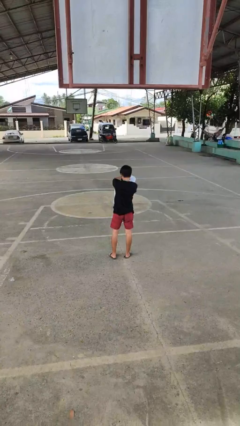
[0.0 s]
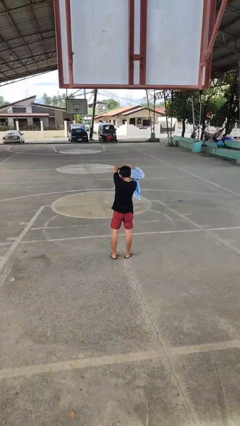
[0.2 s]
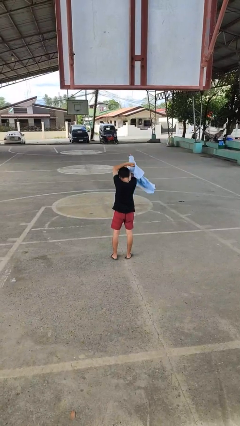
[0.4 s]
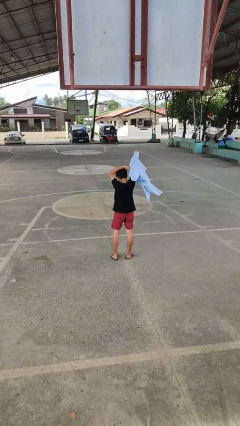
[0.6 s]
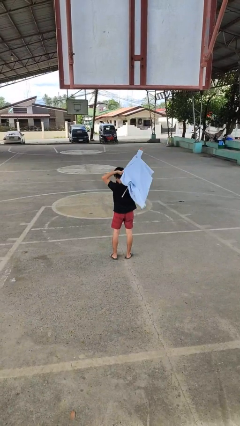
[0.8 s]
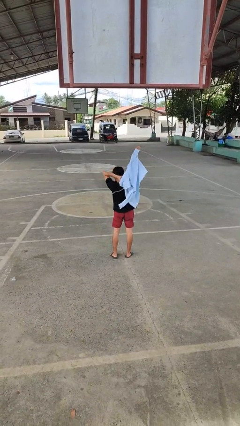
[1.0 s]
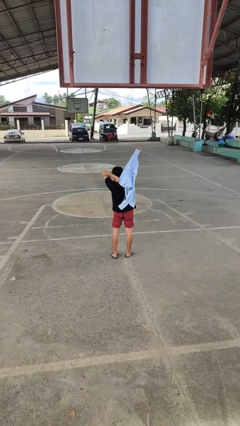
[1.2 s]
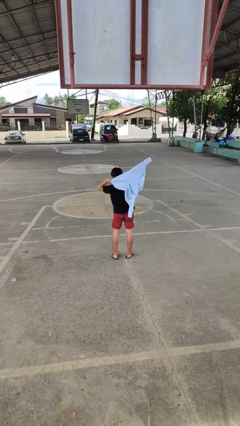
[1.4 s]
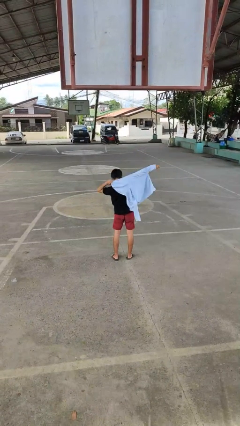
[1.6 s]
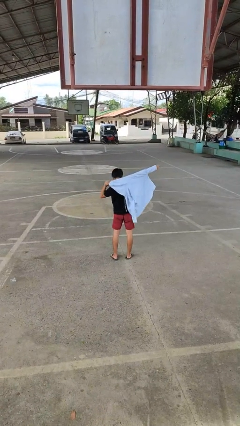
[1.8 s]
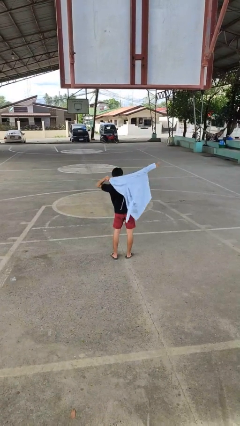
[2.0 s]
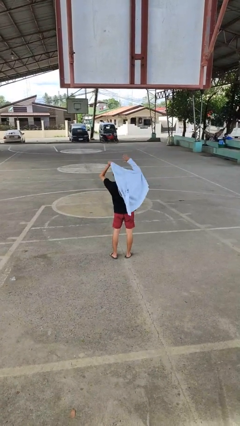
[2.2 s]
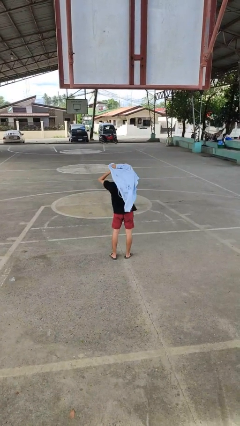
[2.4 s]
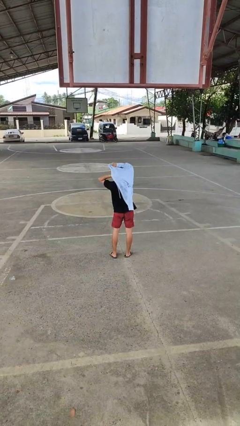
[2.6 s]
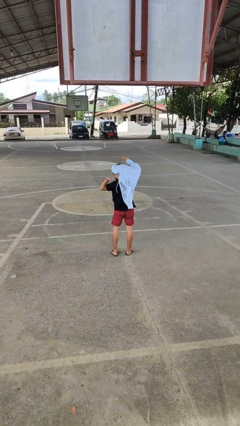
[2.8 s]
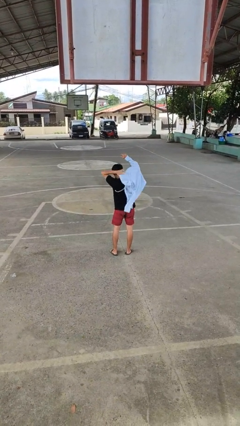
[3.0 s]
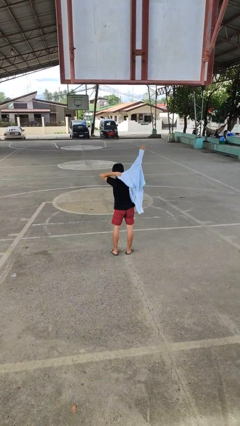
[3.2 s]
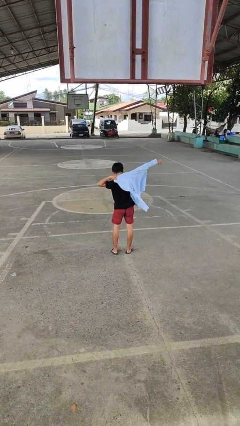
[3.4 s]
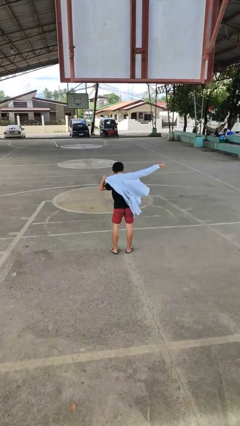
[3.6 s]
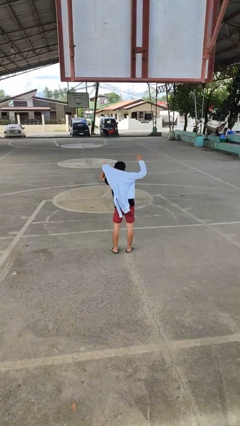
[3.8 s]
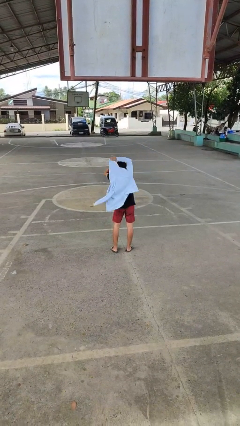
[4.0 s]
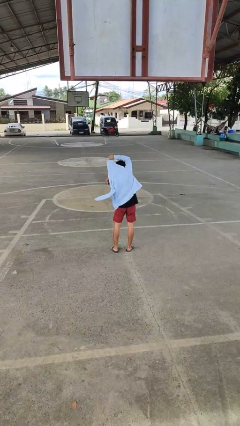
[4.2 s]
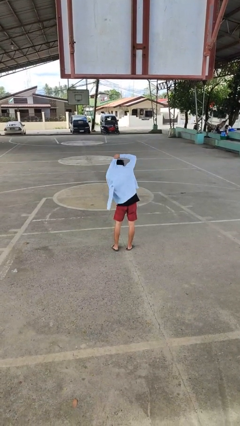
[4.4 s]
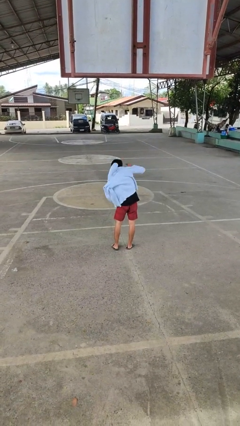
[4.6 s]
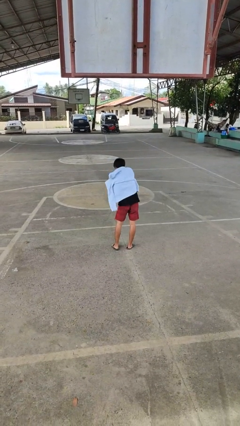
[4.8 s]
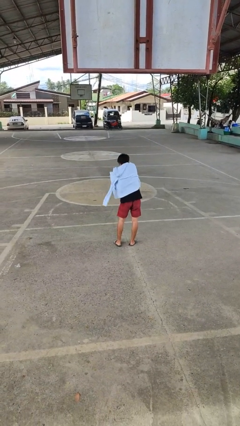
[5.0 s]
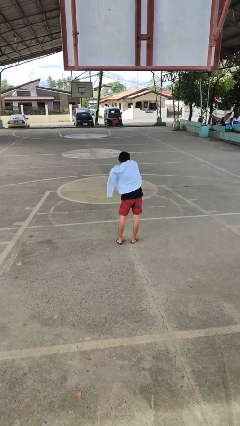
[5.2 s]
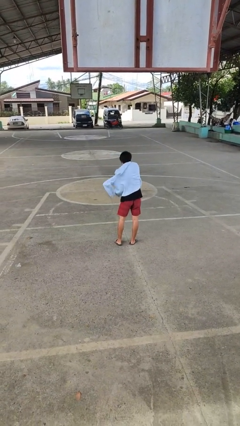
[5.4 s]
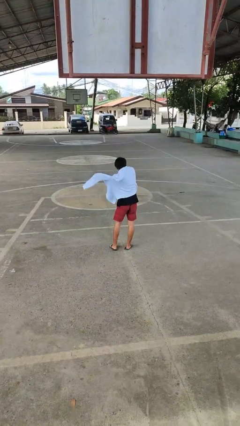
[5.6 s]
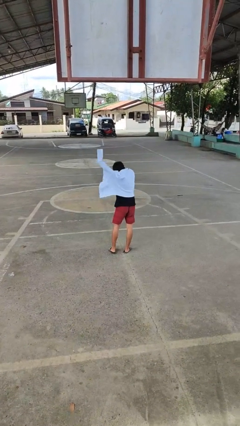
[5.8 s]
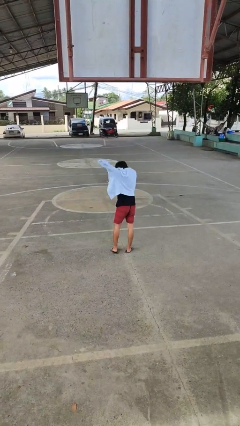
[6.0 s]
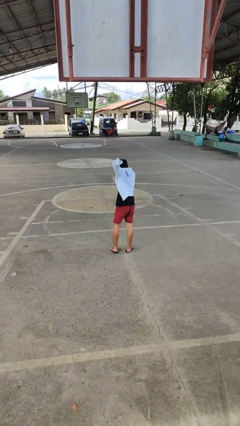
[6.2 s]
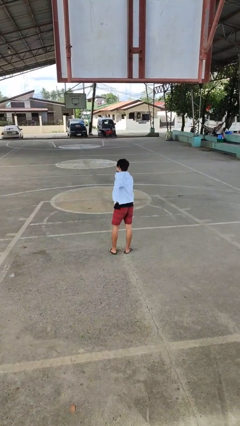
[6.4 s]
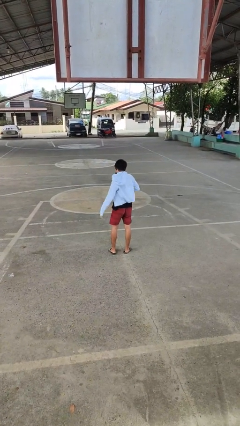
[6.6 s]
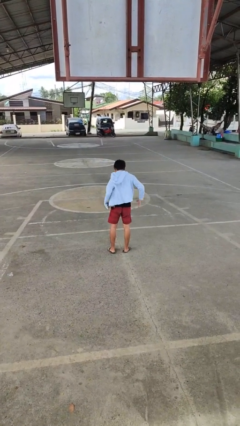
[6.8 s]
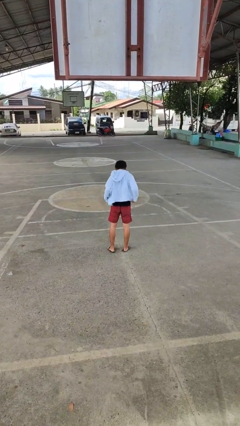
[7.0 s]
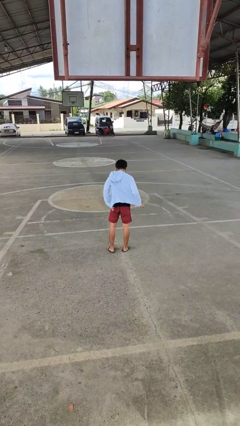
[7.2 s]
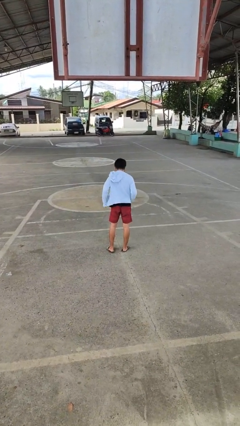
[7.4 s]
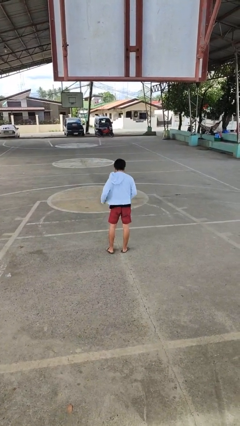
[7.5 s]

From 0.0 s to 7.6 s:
person puts on jacket

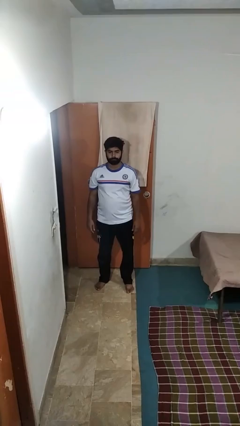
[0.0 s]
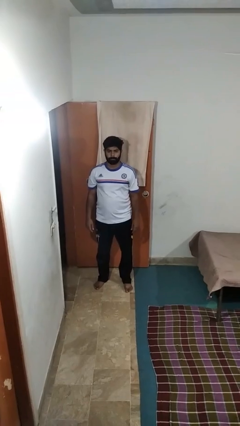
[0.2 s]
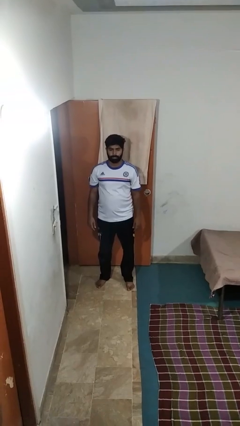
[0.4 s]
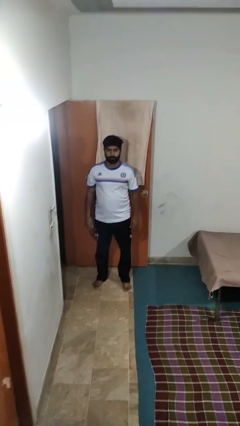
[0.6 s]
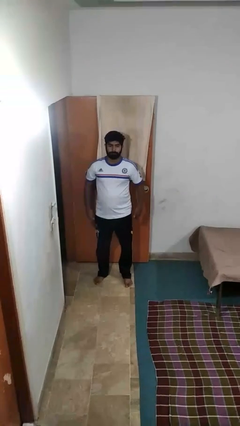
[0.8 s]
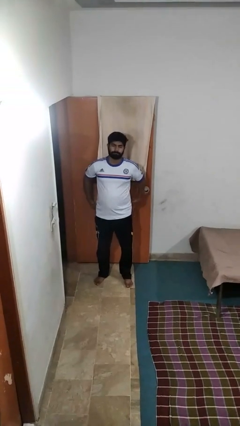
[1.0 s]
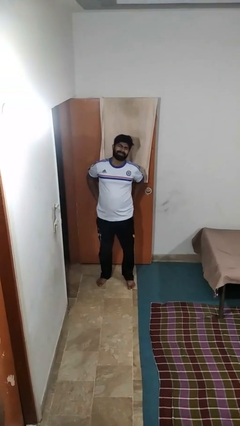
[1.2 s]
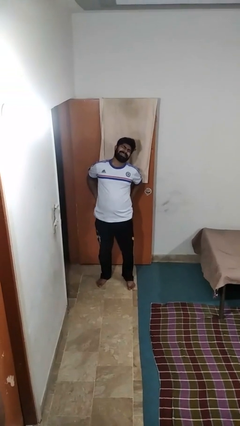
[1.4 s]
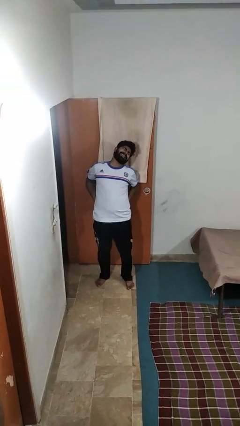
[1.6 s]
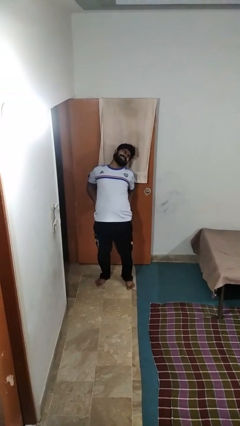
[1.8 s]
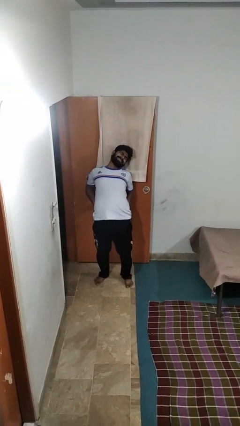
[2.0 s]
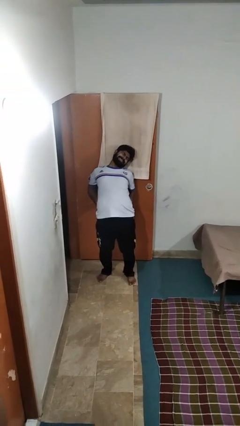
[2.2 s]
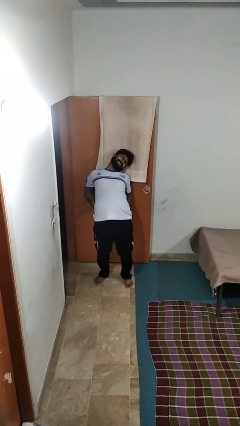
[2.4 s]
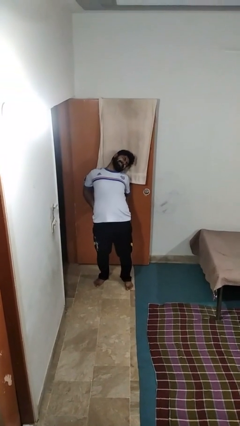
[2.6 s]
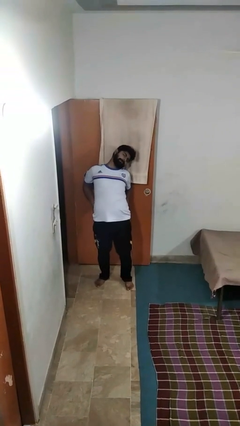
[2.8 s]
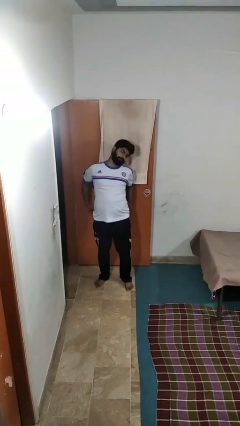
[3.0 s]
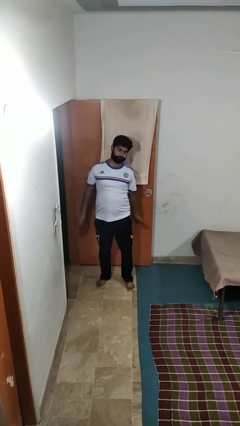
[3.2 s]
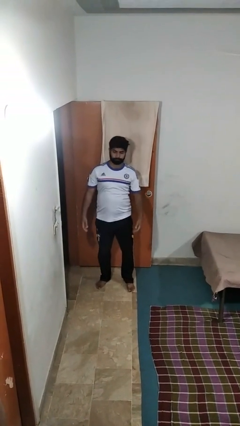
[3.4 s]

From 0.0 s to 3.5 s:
person stretches back

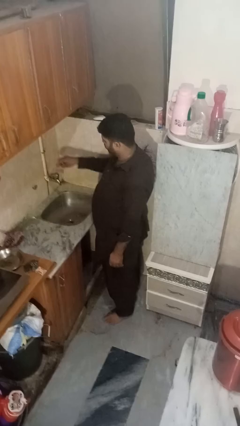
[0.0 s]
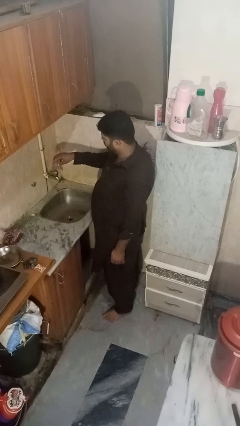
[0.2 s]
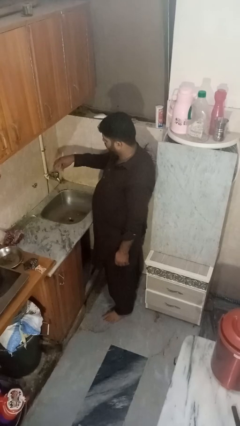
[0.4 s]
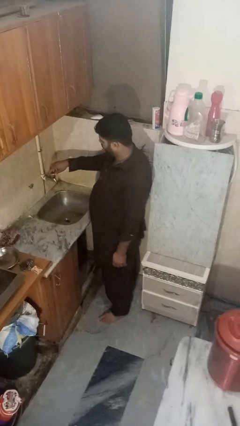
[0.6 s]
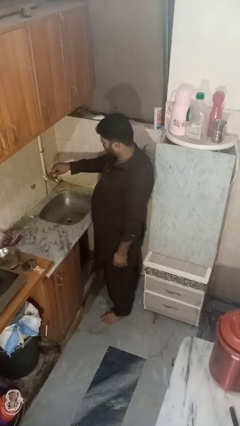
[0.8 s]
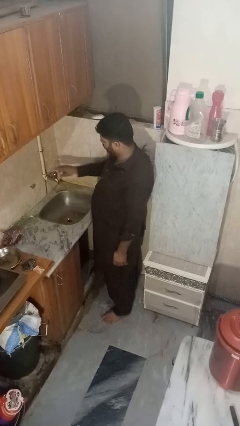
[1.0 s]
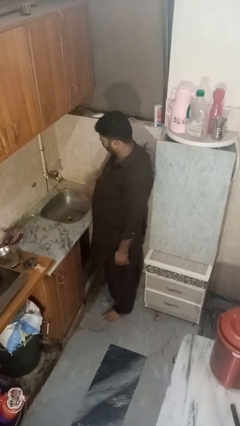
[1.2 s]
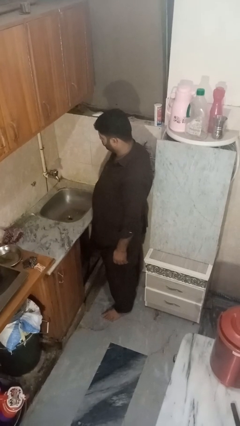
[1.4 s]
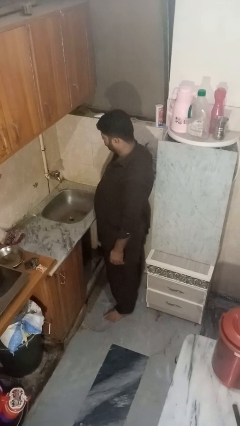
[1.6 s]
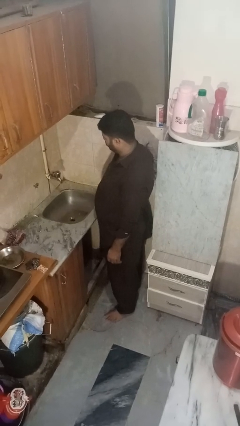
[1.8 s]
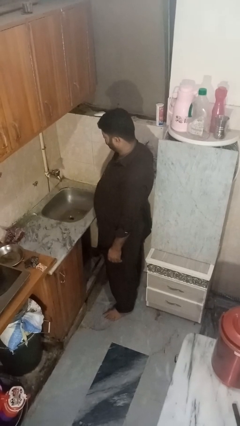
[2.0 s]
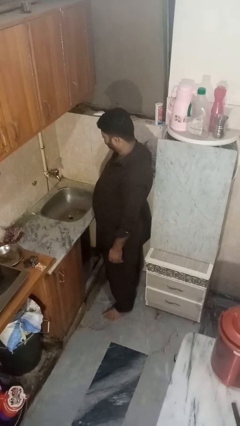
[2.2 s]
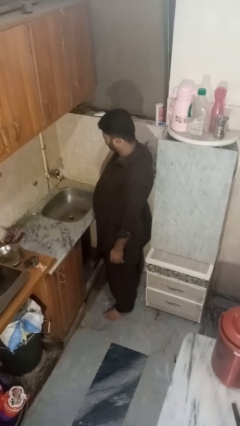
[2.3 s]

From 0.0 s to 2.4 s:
person turns off faucet

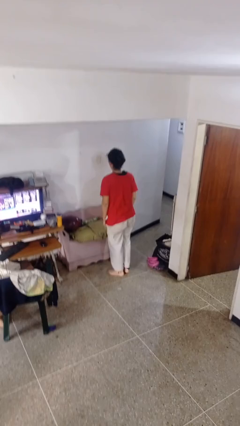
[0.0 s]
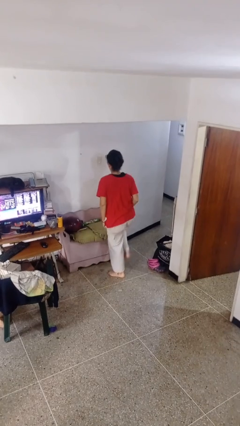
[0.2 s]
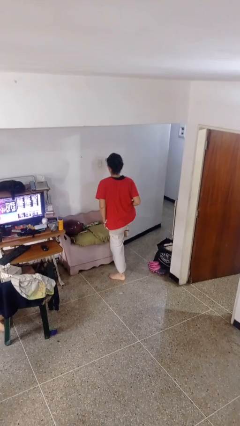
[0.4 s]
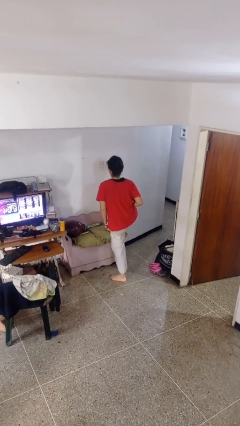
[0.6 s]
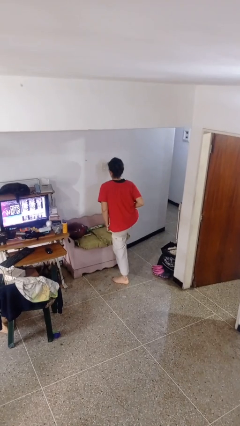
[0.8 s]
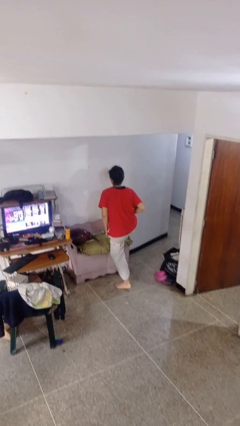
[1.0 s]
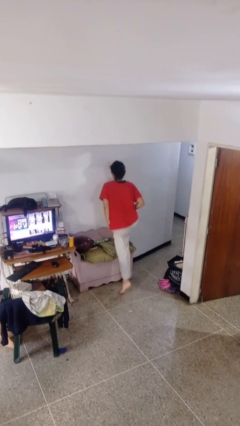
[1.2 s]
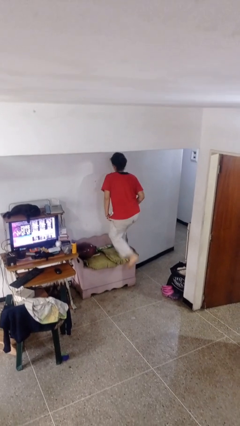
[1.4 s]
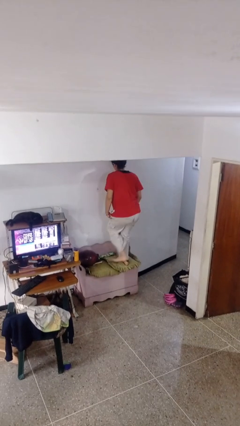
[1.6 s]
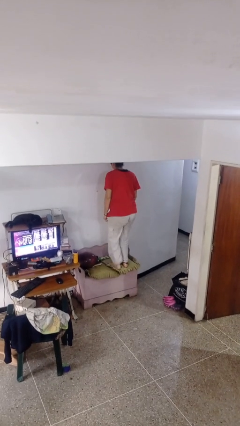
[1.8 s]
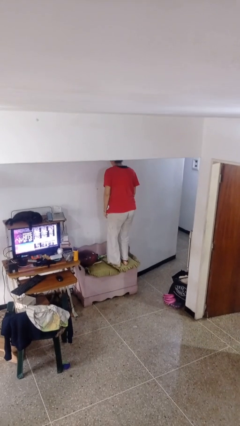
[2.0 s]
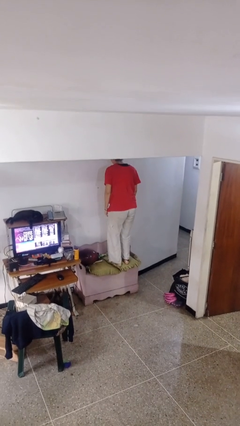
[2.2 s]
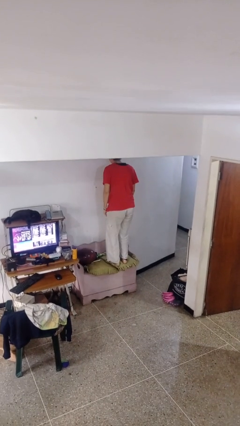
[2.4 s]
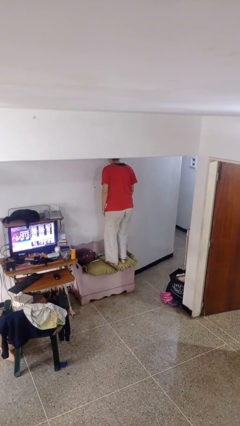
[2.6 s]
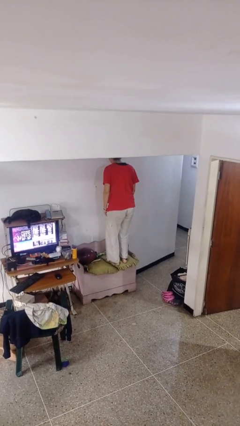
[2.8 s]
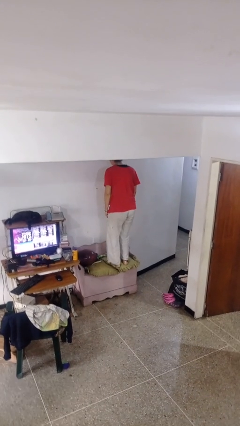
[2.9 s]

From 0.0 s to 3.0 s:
person climbs on couch

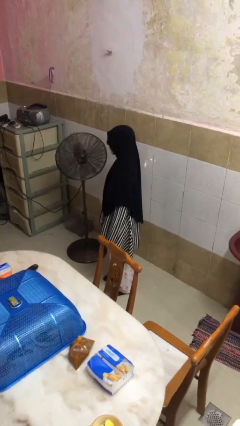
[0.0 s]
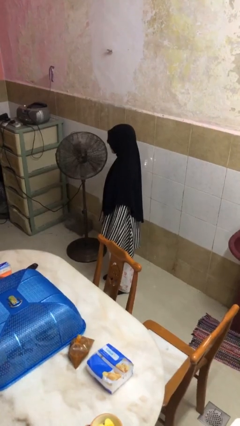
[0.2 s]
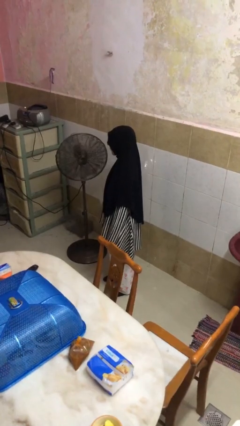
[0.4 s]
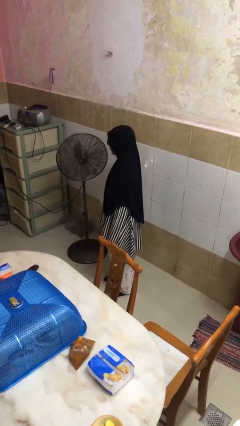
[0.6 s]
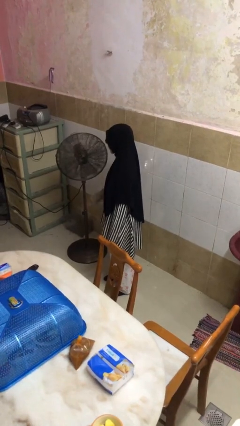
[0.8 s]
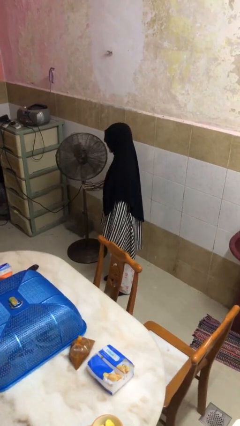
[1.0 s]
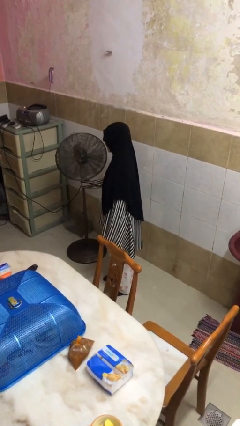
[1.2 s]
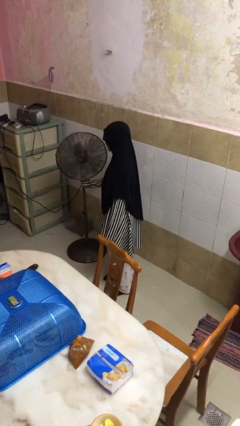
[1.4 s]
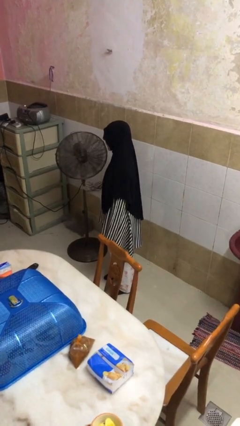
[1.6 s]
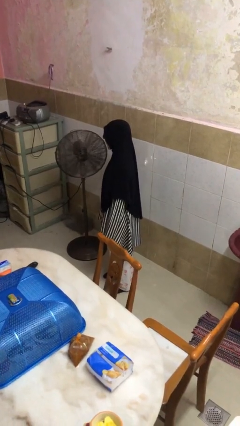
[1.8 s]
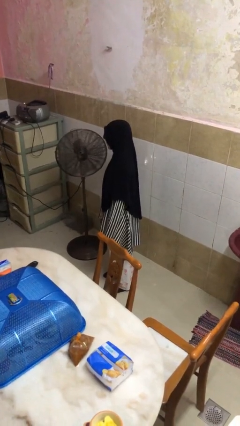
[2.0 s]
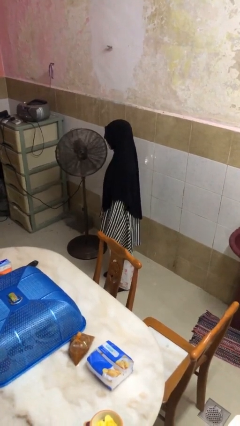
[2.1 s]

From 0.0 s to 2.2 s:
person turns on fan
